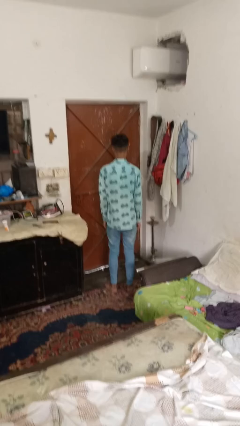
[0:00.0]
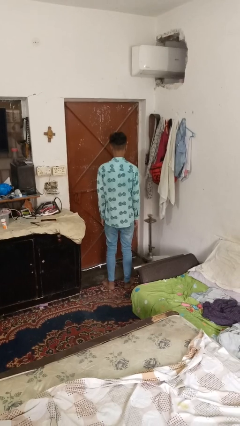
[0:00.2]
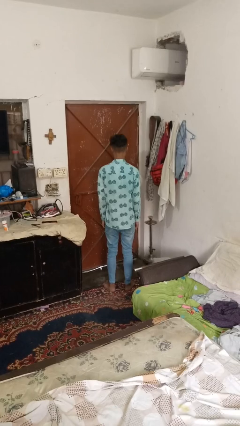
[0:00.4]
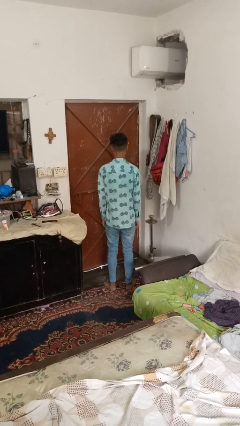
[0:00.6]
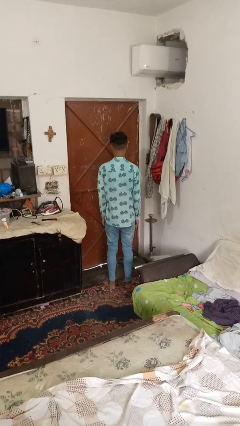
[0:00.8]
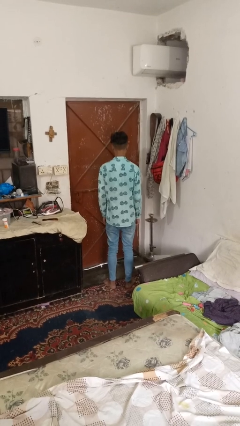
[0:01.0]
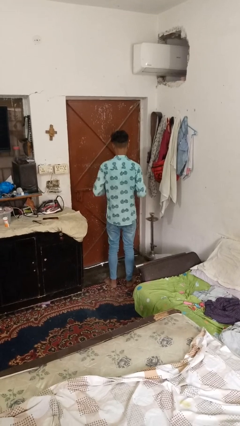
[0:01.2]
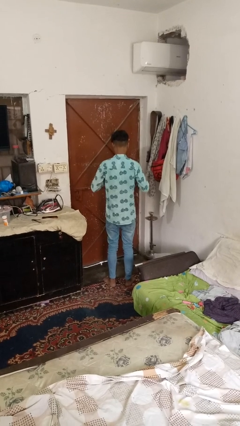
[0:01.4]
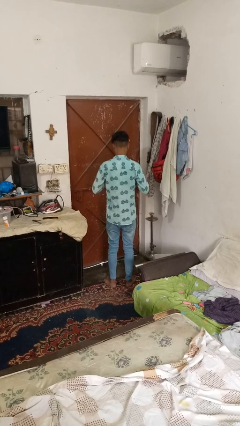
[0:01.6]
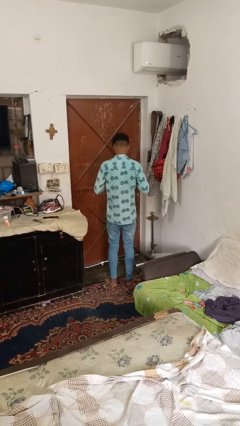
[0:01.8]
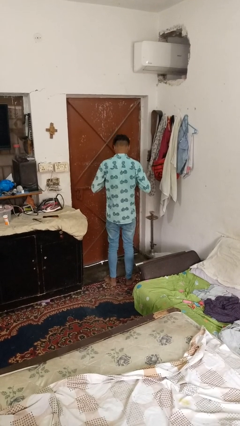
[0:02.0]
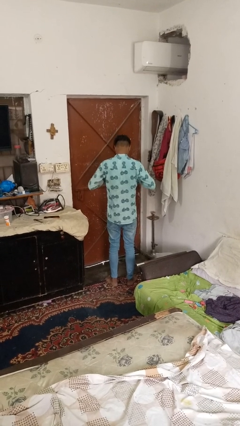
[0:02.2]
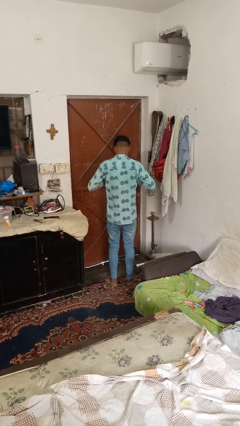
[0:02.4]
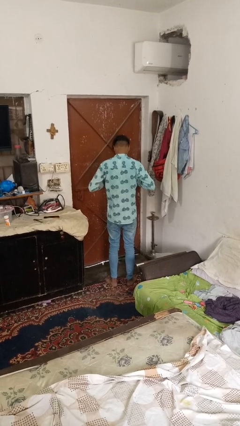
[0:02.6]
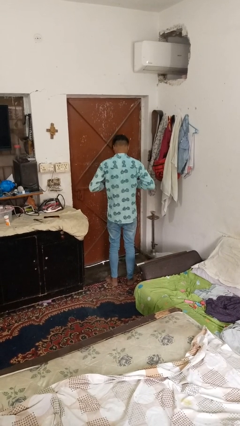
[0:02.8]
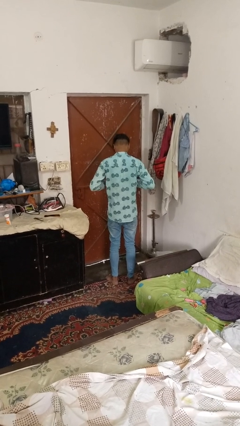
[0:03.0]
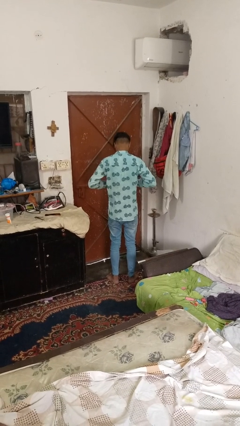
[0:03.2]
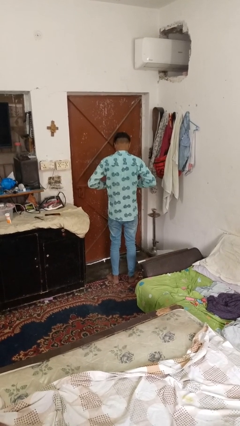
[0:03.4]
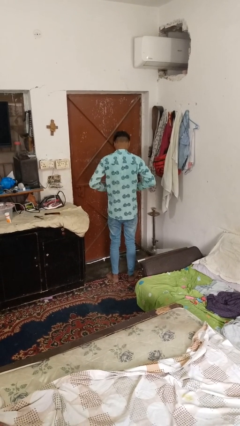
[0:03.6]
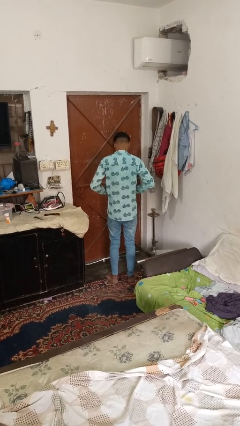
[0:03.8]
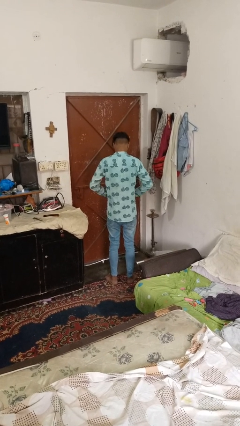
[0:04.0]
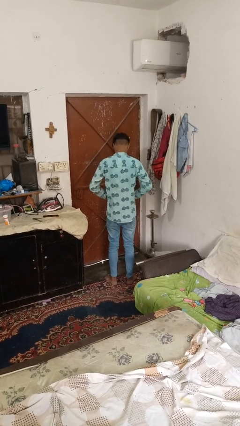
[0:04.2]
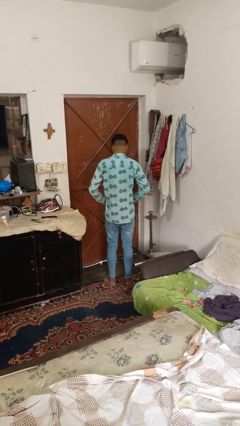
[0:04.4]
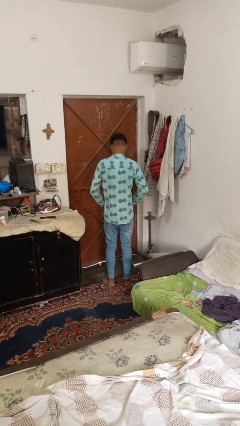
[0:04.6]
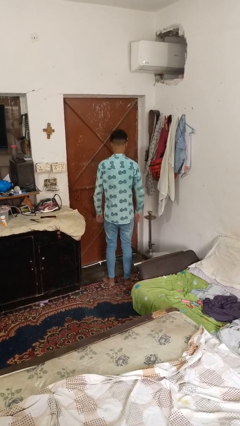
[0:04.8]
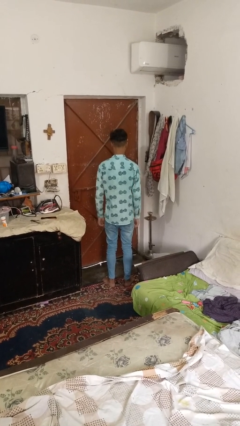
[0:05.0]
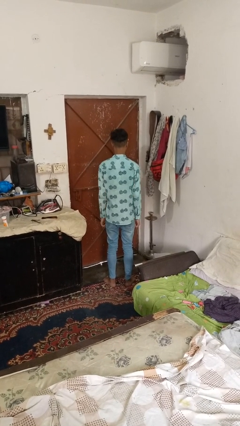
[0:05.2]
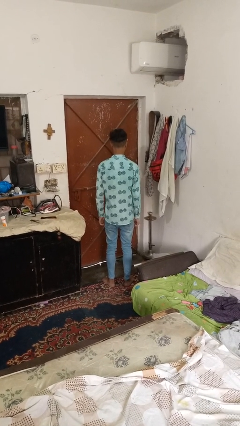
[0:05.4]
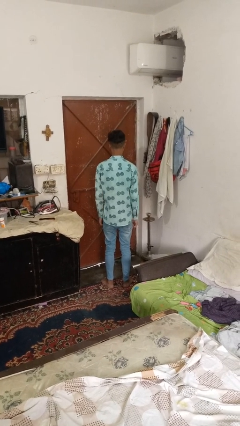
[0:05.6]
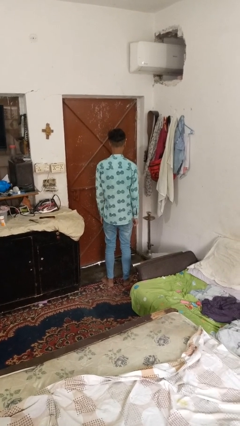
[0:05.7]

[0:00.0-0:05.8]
person unbuttons shirt

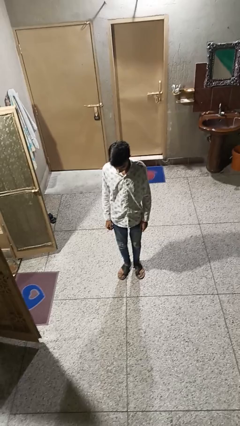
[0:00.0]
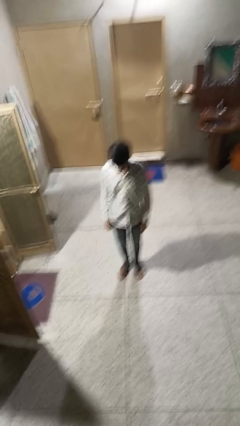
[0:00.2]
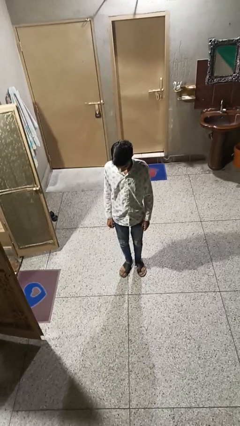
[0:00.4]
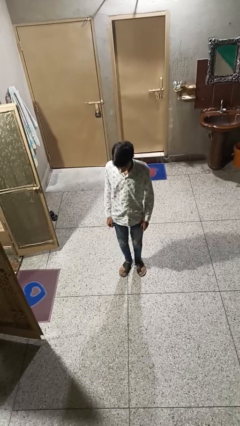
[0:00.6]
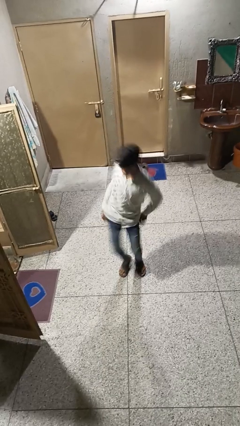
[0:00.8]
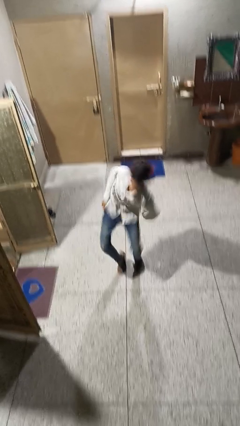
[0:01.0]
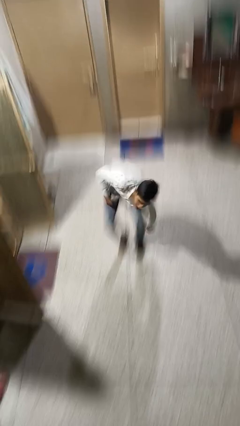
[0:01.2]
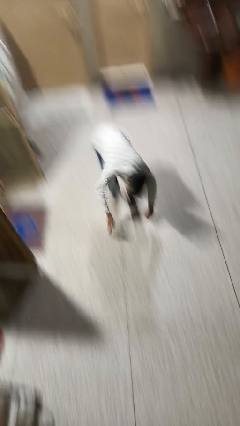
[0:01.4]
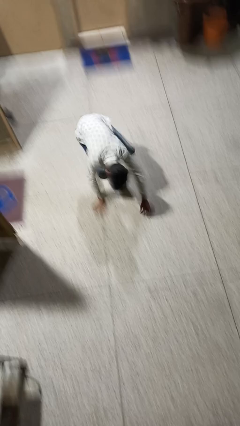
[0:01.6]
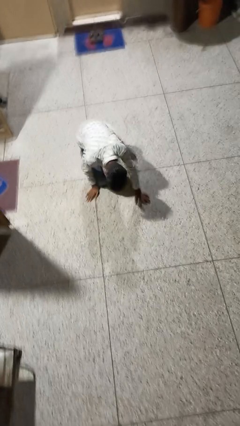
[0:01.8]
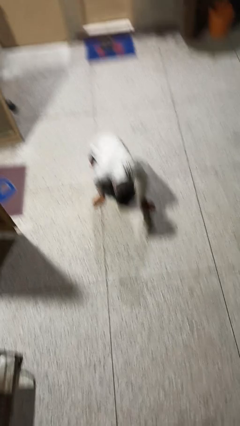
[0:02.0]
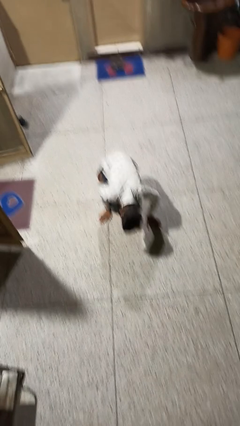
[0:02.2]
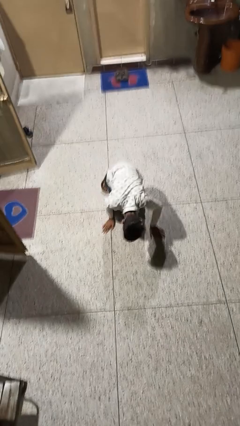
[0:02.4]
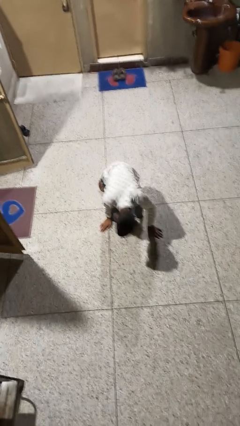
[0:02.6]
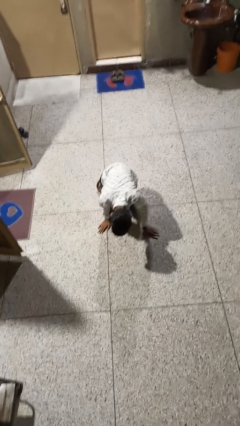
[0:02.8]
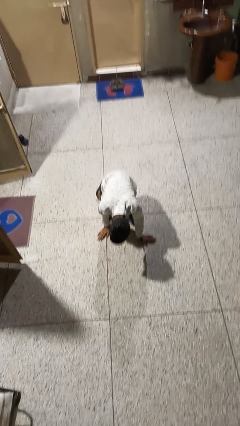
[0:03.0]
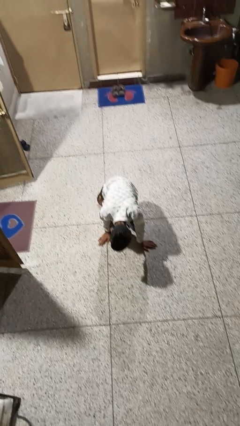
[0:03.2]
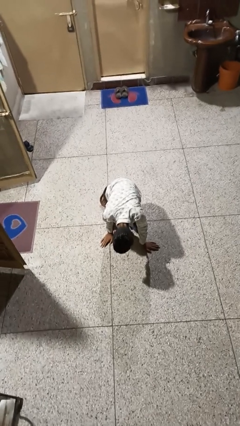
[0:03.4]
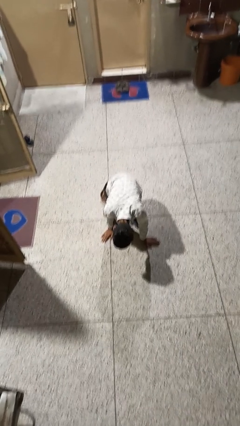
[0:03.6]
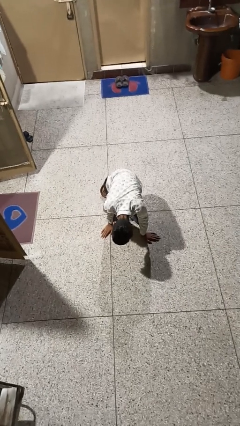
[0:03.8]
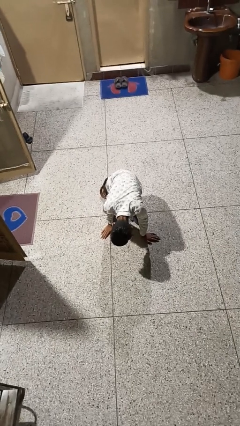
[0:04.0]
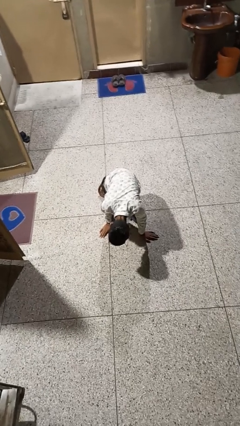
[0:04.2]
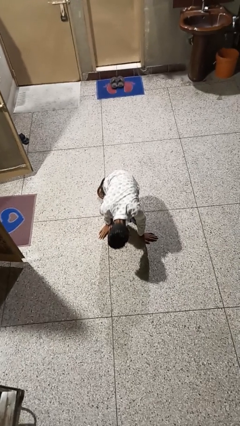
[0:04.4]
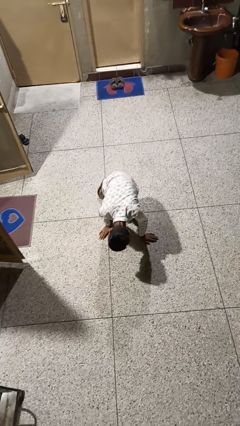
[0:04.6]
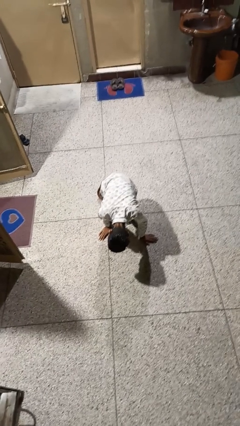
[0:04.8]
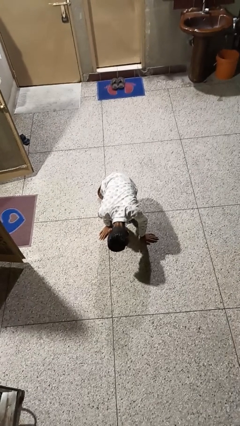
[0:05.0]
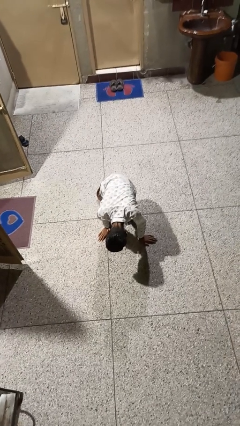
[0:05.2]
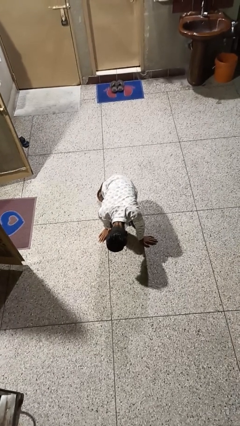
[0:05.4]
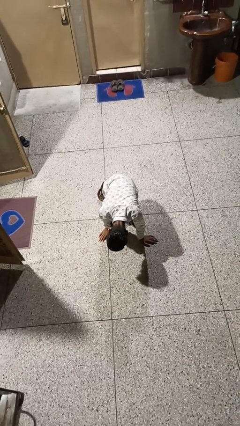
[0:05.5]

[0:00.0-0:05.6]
person falls while standing

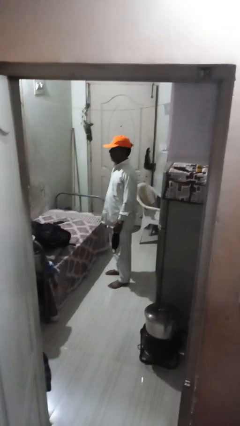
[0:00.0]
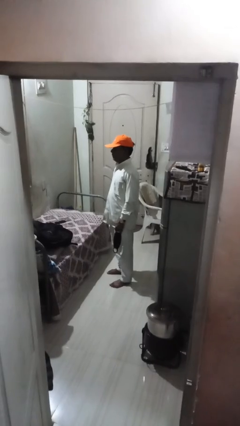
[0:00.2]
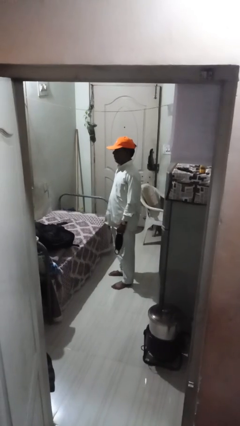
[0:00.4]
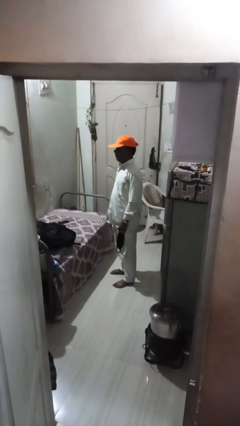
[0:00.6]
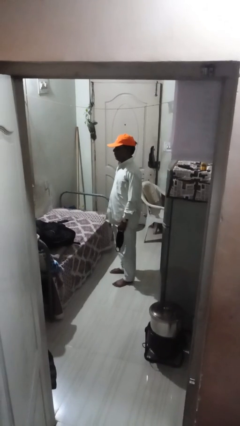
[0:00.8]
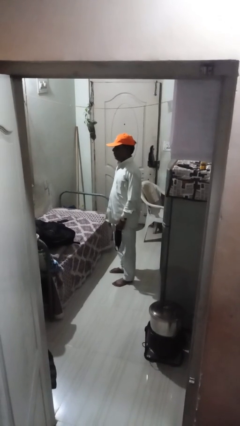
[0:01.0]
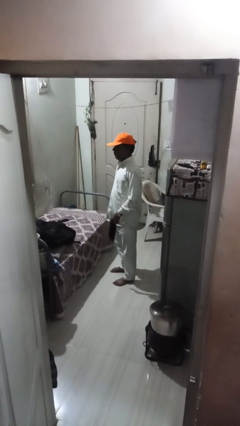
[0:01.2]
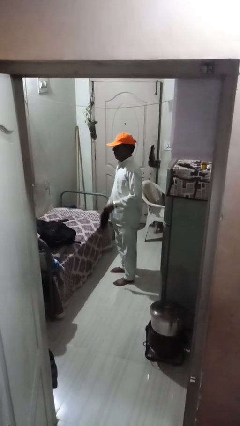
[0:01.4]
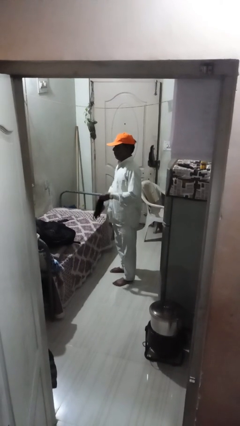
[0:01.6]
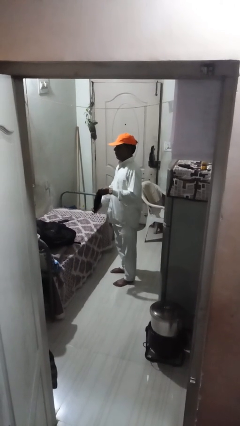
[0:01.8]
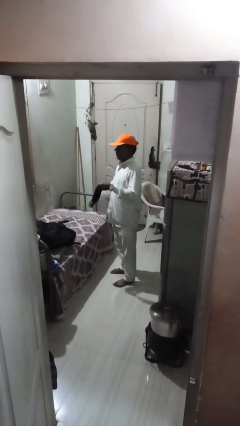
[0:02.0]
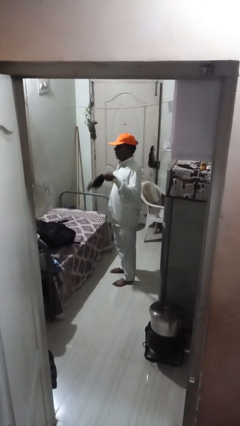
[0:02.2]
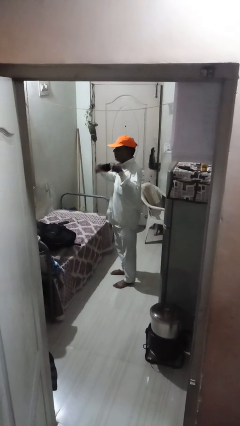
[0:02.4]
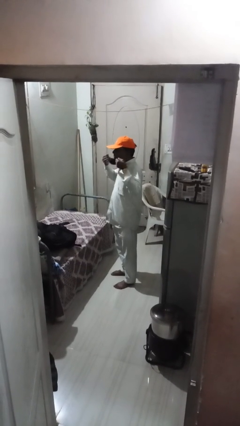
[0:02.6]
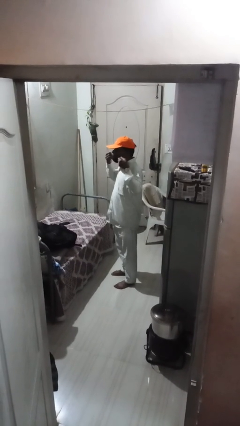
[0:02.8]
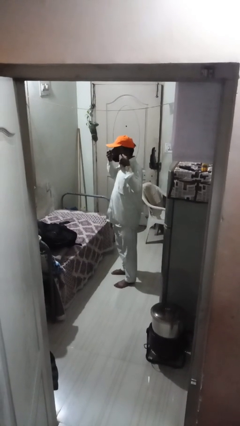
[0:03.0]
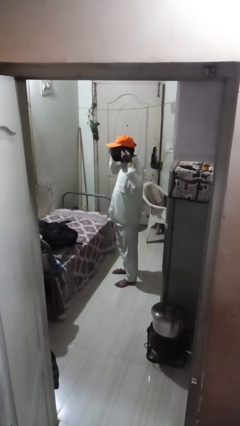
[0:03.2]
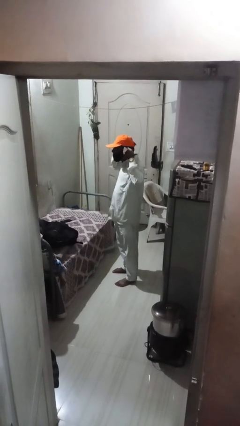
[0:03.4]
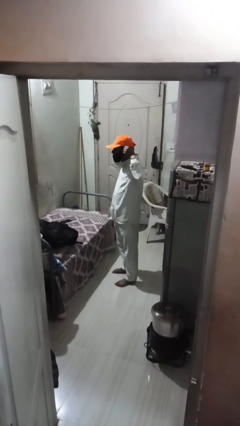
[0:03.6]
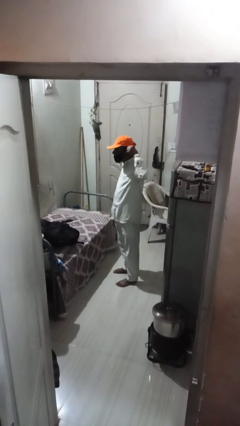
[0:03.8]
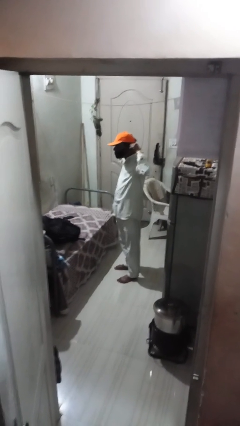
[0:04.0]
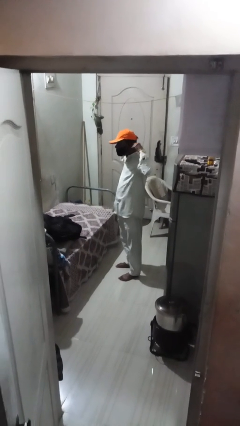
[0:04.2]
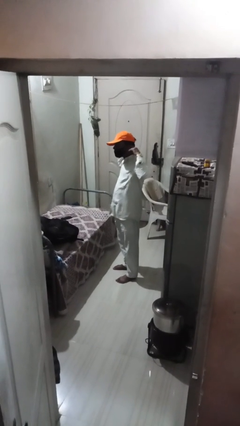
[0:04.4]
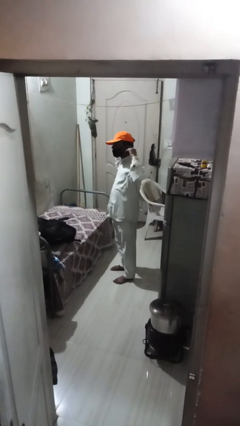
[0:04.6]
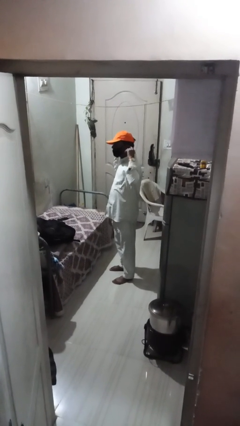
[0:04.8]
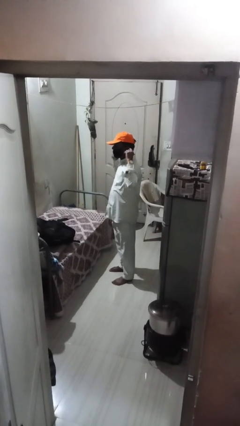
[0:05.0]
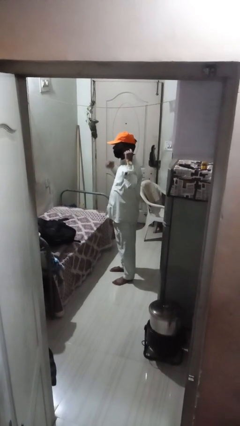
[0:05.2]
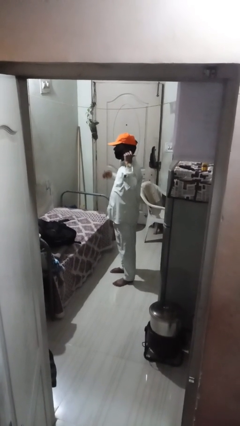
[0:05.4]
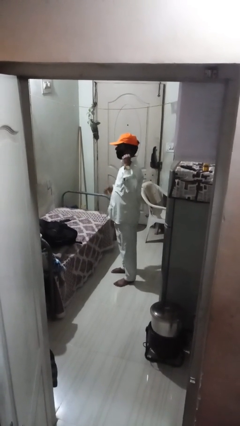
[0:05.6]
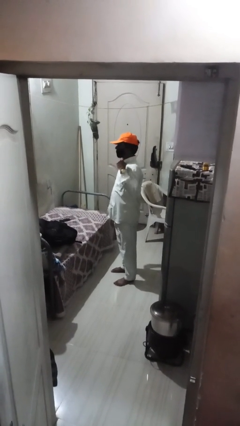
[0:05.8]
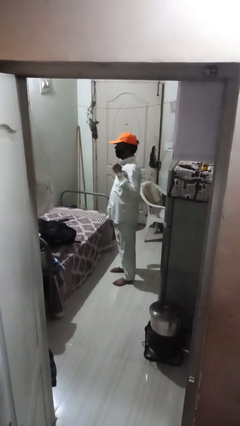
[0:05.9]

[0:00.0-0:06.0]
person puts on facemask

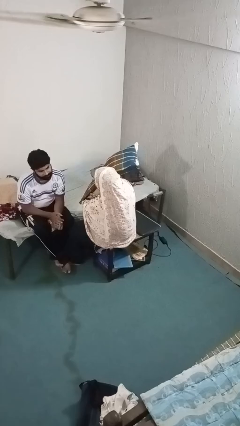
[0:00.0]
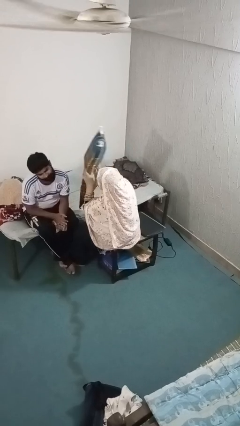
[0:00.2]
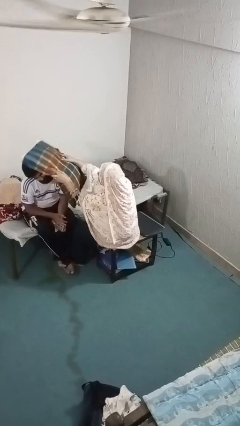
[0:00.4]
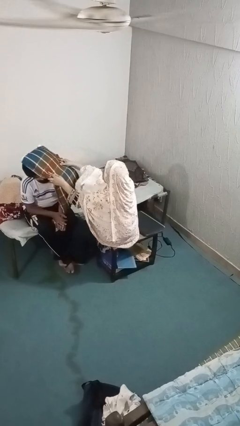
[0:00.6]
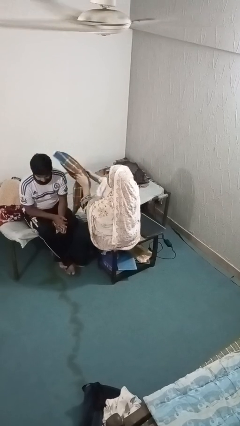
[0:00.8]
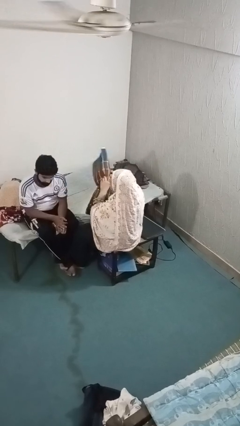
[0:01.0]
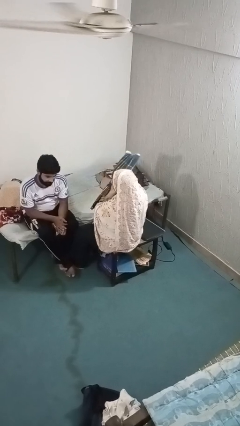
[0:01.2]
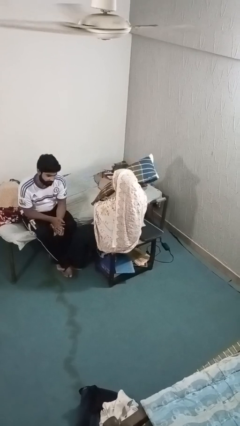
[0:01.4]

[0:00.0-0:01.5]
person hits person with pillow
